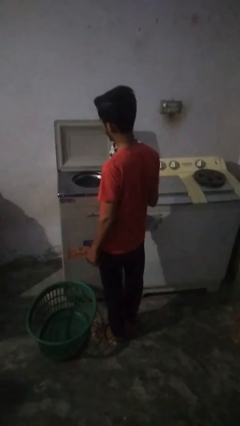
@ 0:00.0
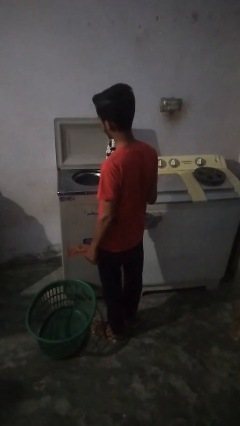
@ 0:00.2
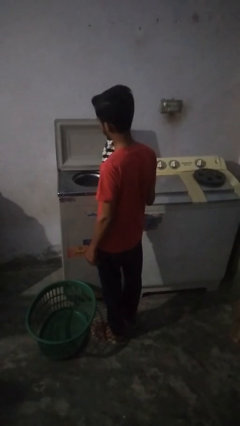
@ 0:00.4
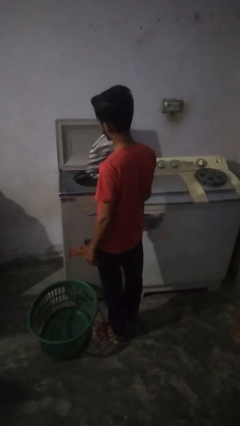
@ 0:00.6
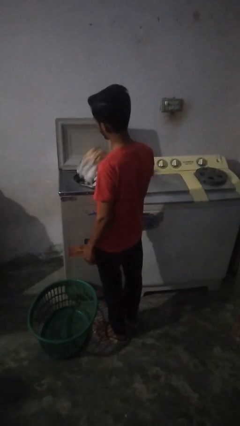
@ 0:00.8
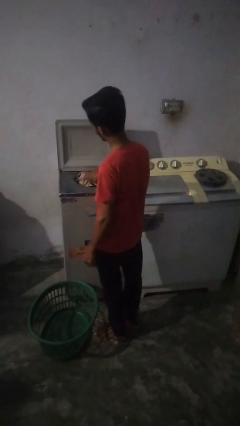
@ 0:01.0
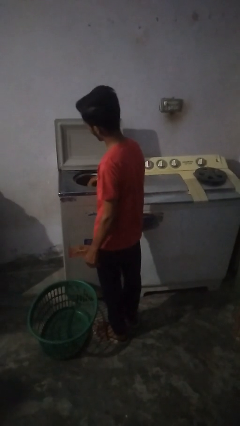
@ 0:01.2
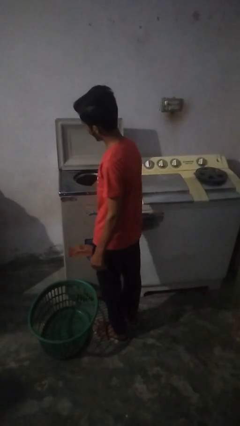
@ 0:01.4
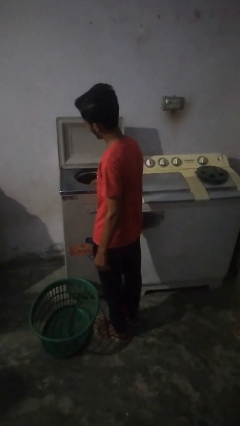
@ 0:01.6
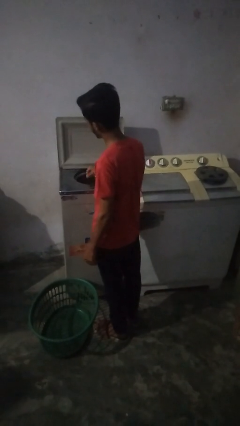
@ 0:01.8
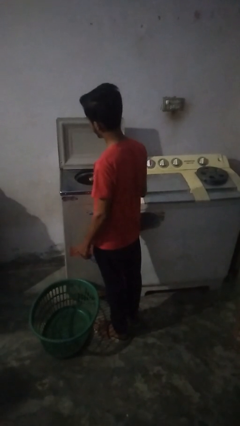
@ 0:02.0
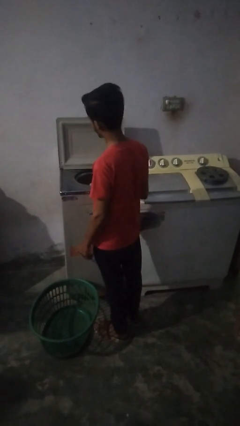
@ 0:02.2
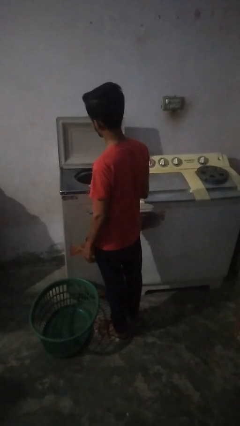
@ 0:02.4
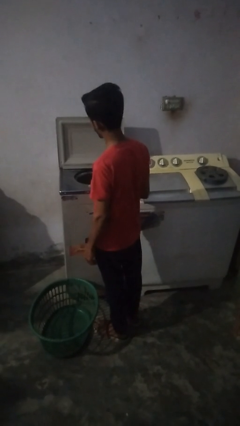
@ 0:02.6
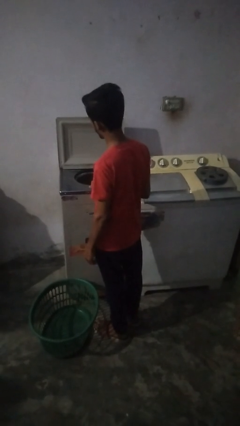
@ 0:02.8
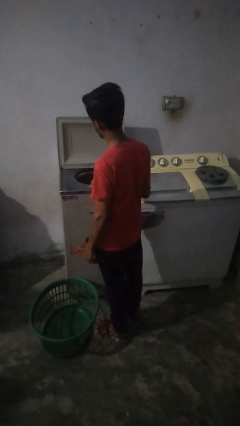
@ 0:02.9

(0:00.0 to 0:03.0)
person loads dryer

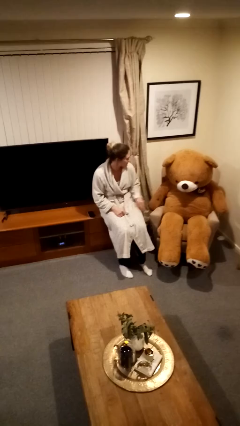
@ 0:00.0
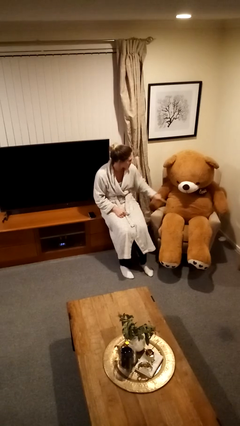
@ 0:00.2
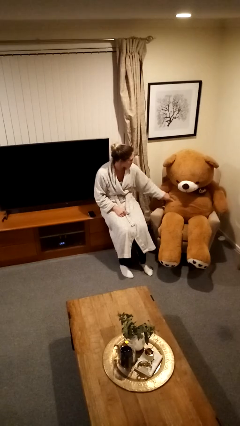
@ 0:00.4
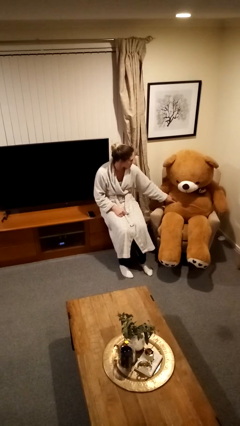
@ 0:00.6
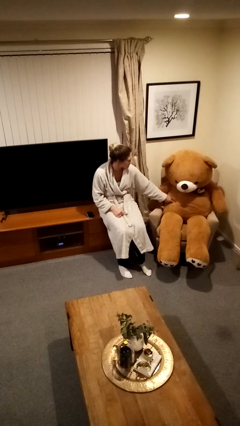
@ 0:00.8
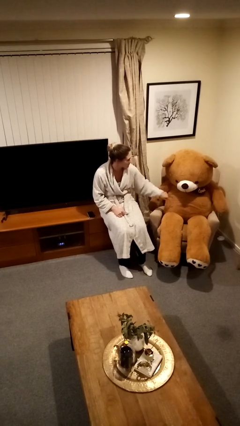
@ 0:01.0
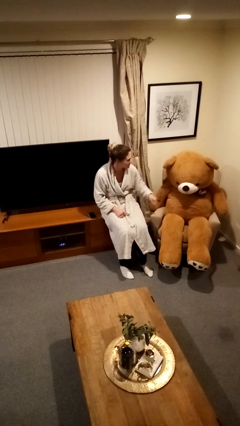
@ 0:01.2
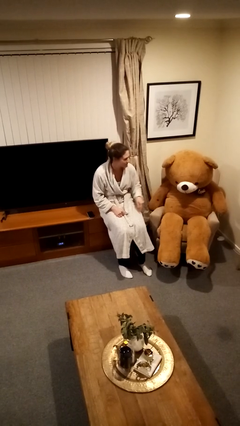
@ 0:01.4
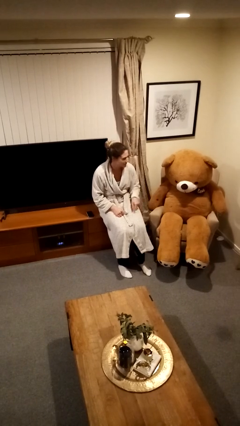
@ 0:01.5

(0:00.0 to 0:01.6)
person taps object with finger

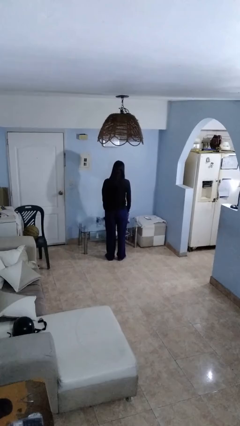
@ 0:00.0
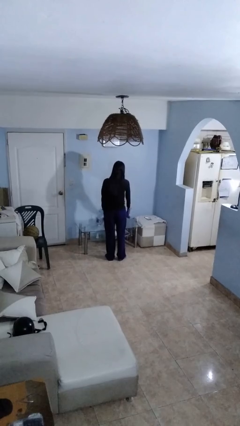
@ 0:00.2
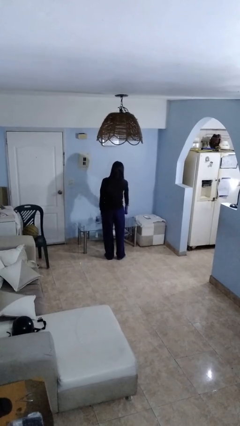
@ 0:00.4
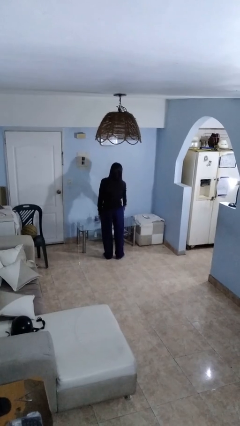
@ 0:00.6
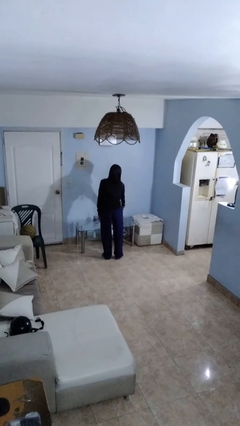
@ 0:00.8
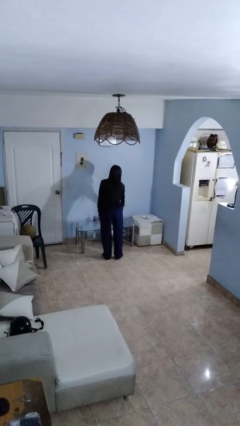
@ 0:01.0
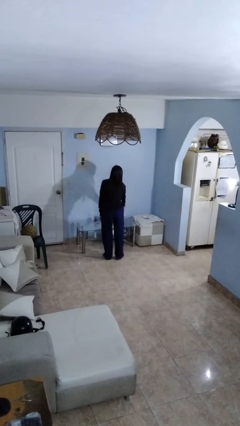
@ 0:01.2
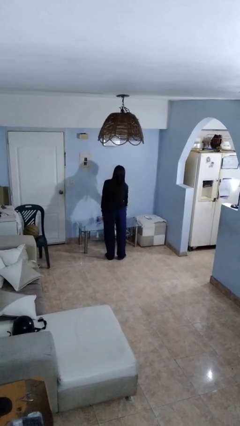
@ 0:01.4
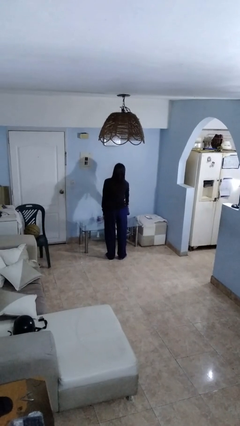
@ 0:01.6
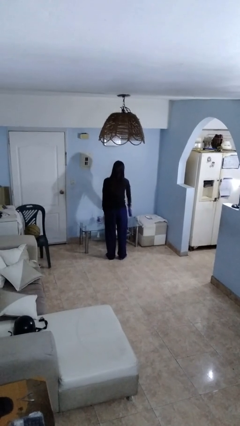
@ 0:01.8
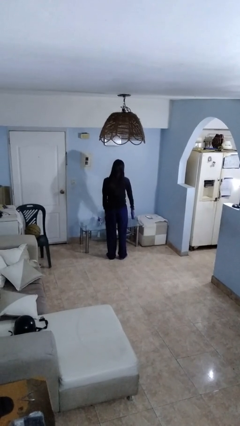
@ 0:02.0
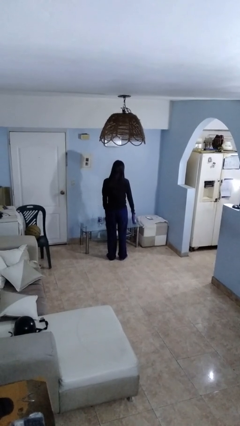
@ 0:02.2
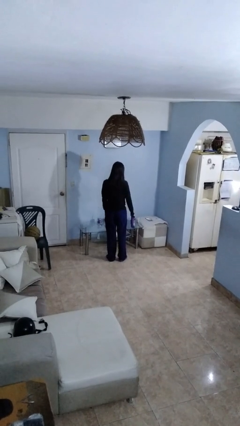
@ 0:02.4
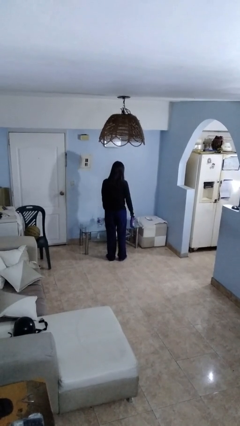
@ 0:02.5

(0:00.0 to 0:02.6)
person sprays from bottle

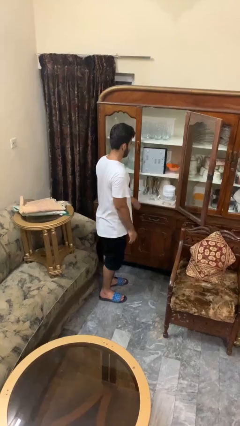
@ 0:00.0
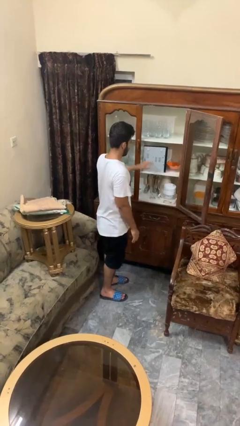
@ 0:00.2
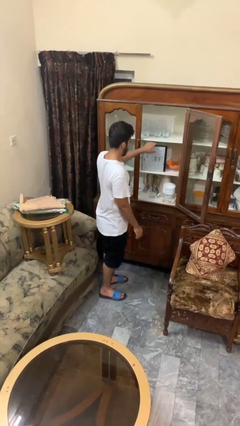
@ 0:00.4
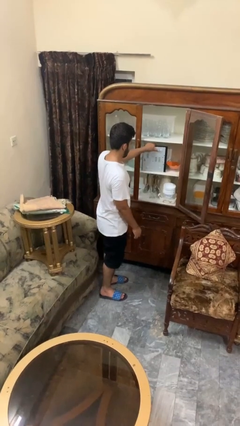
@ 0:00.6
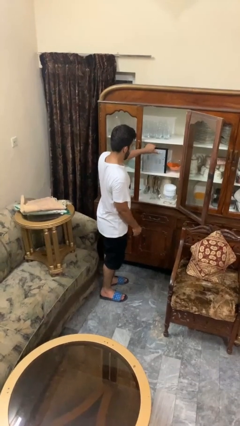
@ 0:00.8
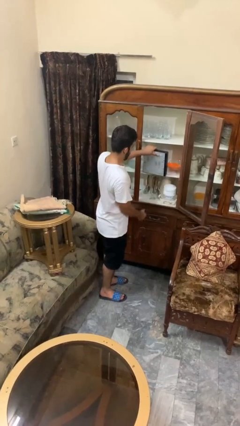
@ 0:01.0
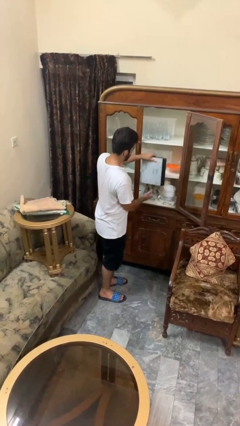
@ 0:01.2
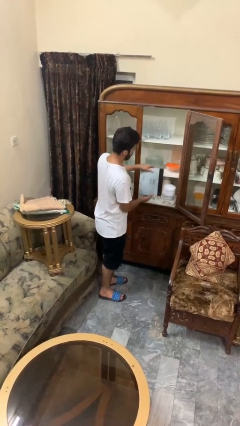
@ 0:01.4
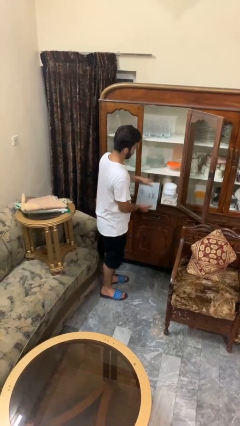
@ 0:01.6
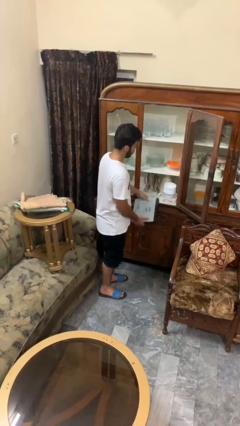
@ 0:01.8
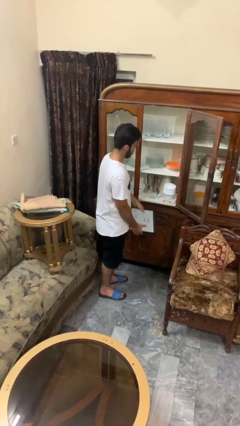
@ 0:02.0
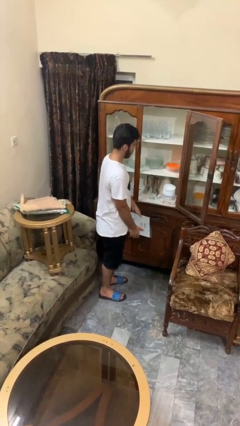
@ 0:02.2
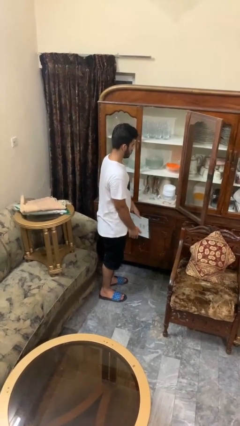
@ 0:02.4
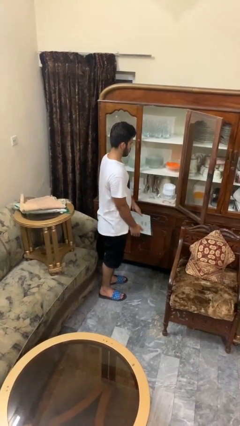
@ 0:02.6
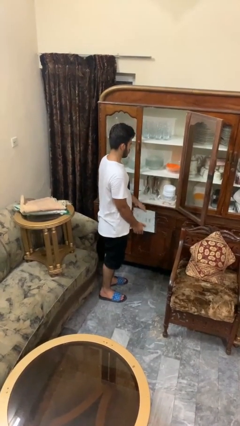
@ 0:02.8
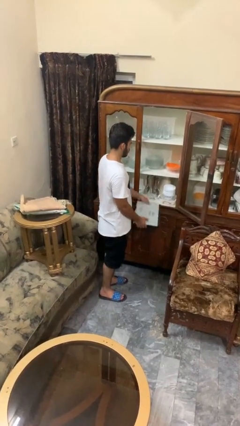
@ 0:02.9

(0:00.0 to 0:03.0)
person picks up object from cabinet

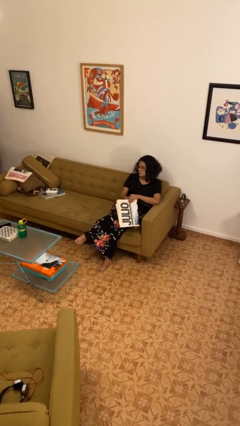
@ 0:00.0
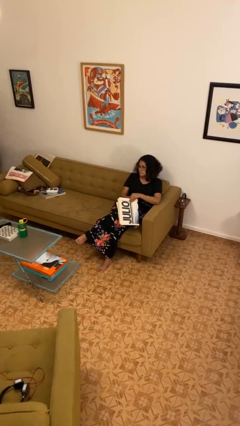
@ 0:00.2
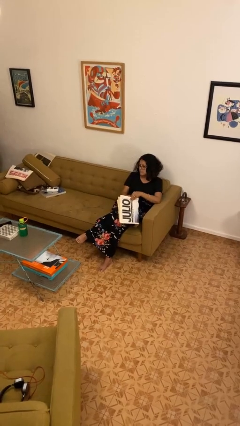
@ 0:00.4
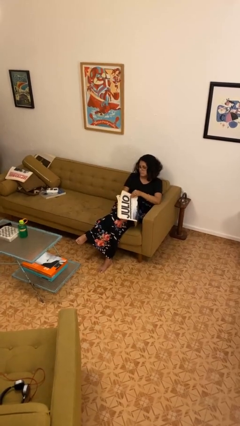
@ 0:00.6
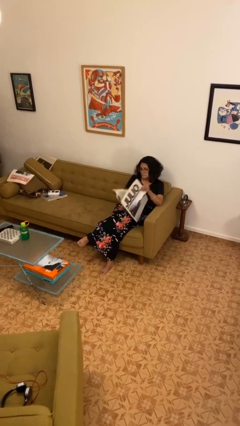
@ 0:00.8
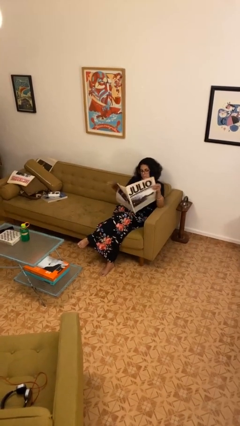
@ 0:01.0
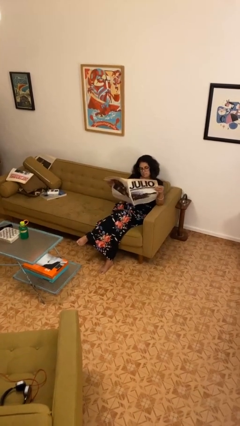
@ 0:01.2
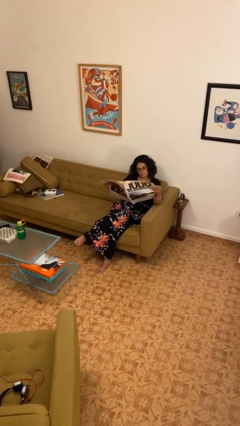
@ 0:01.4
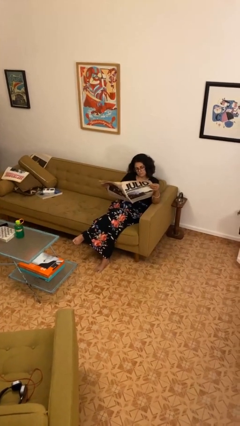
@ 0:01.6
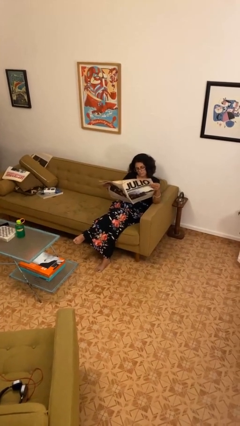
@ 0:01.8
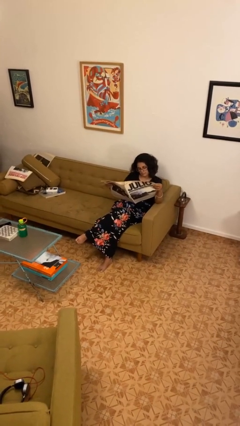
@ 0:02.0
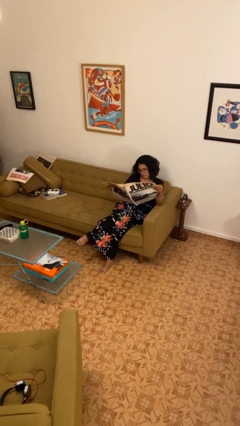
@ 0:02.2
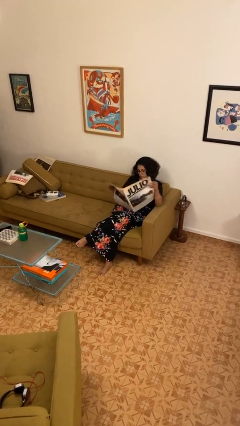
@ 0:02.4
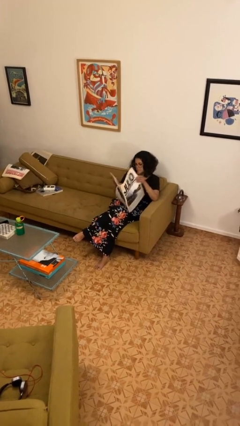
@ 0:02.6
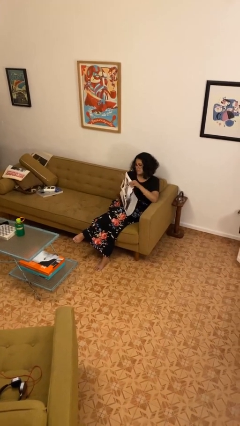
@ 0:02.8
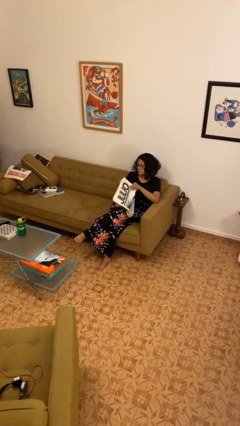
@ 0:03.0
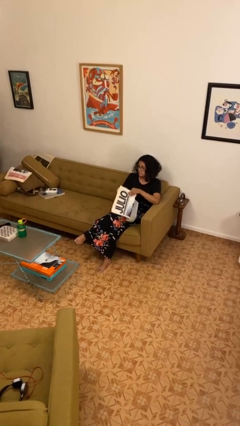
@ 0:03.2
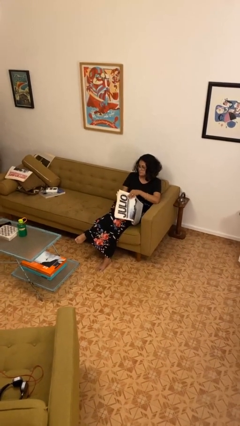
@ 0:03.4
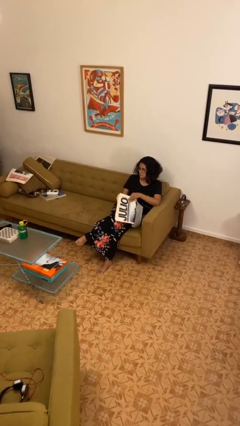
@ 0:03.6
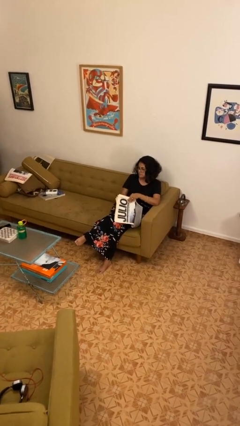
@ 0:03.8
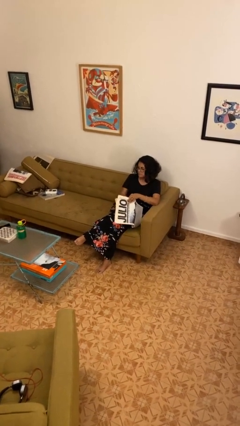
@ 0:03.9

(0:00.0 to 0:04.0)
person reads newspaper

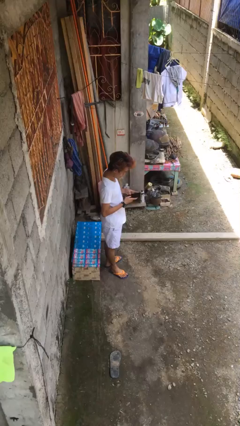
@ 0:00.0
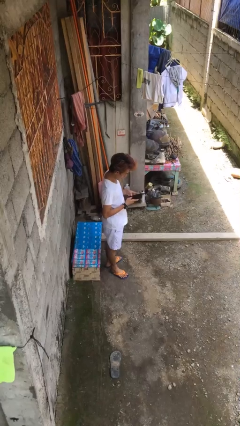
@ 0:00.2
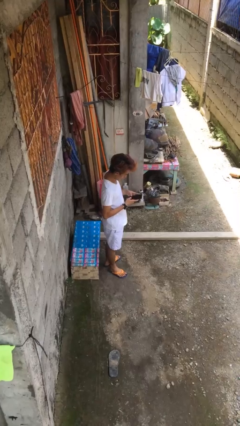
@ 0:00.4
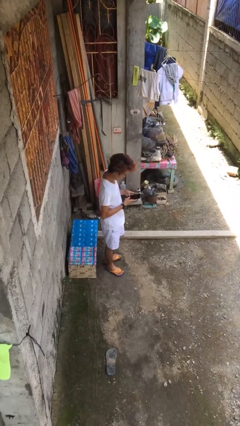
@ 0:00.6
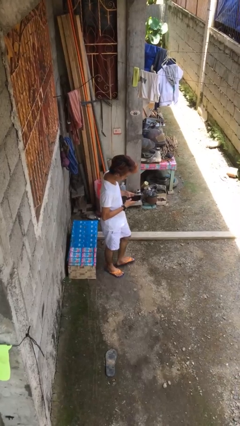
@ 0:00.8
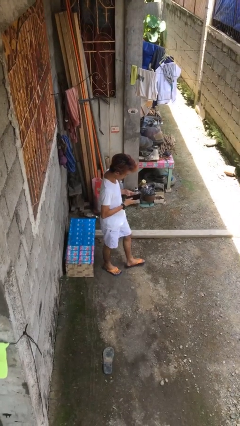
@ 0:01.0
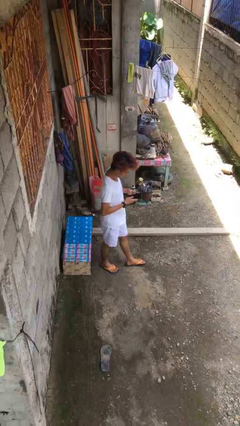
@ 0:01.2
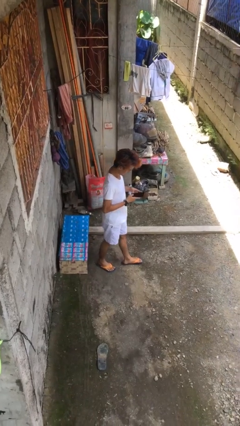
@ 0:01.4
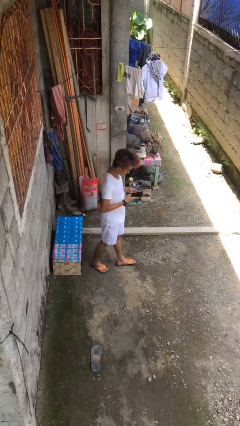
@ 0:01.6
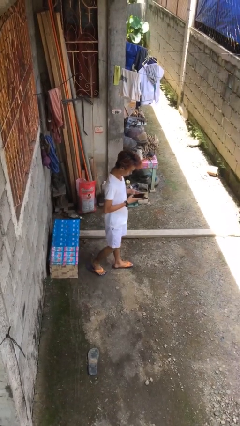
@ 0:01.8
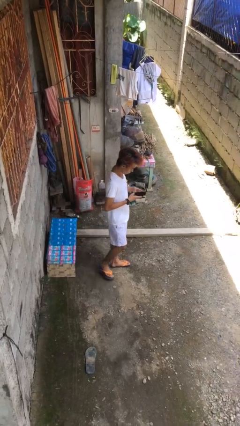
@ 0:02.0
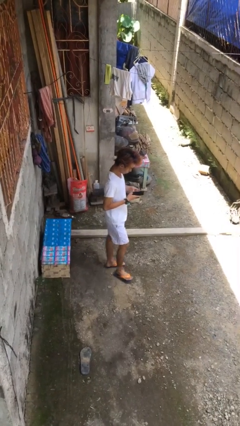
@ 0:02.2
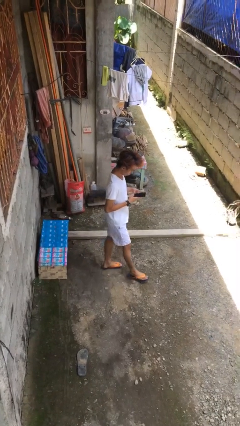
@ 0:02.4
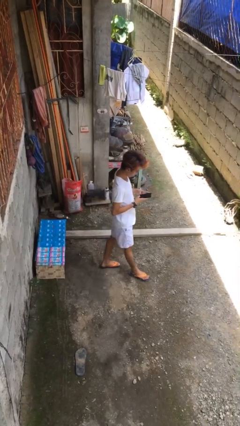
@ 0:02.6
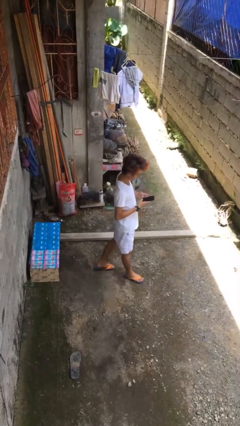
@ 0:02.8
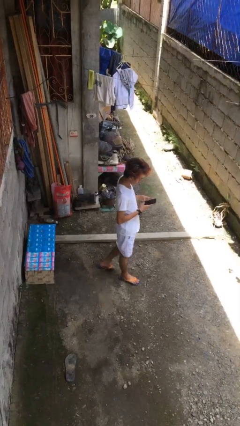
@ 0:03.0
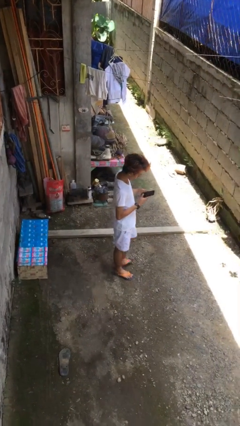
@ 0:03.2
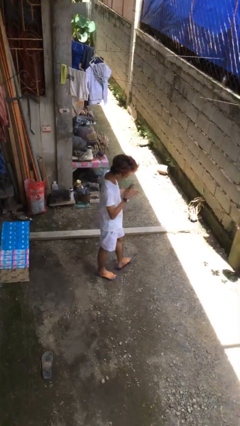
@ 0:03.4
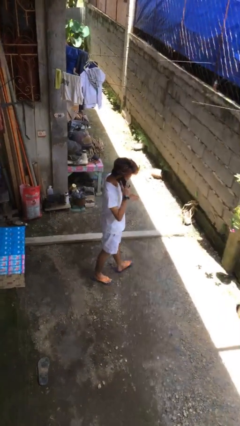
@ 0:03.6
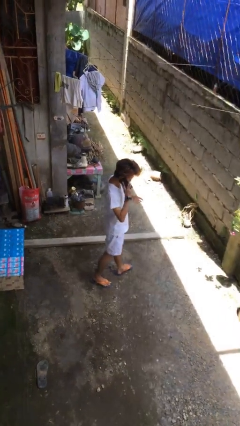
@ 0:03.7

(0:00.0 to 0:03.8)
person texts on phone
